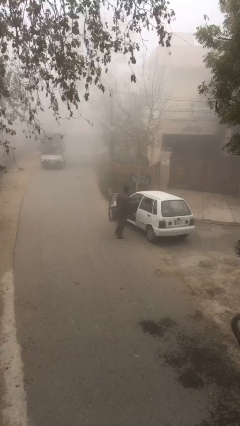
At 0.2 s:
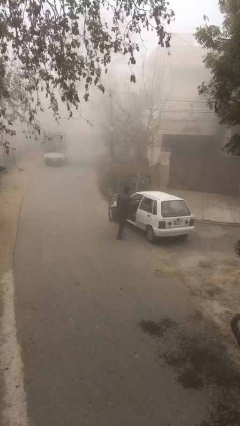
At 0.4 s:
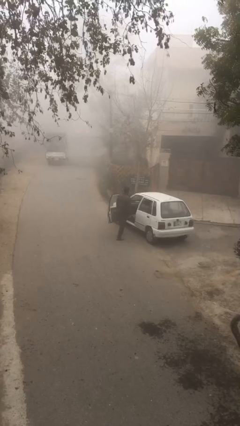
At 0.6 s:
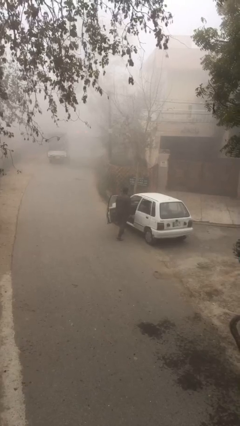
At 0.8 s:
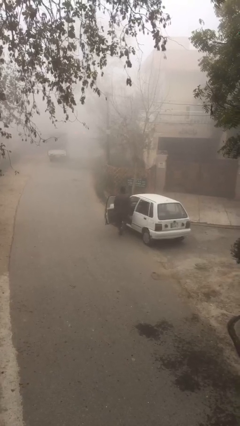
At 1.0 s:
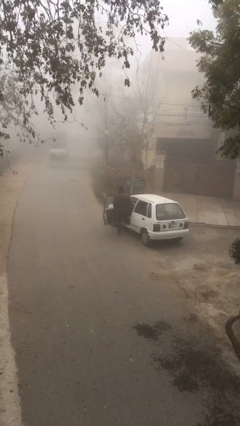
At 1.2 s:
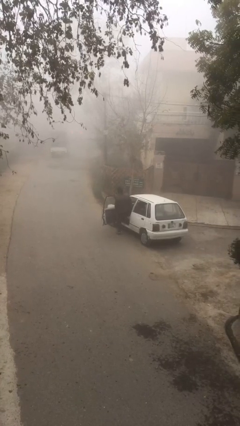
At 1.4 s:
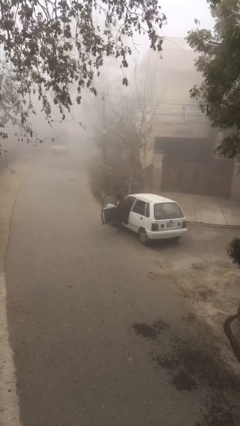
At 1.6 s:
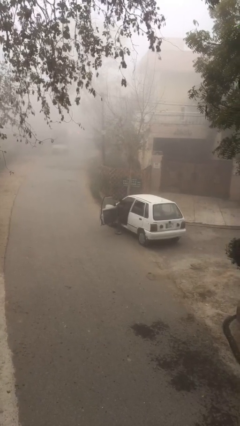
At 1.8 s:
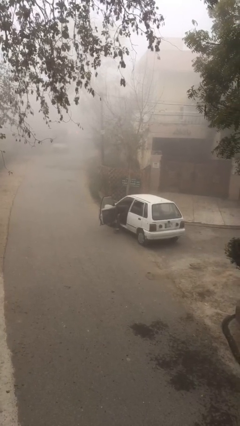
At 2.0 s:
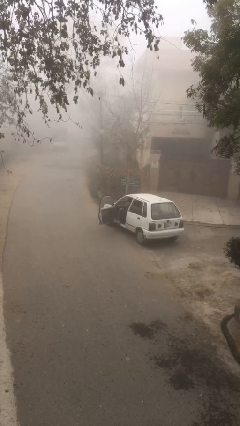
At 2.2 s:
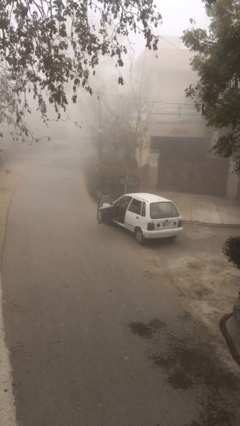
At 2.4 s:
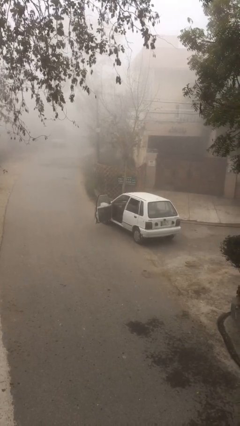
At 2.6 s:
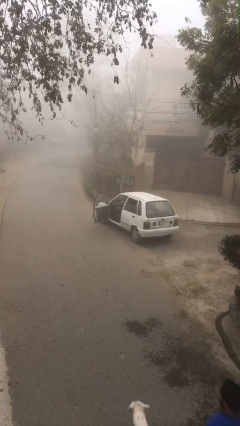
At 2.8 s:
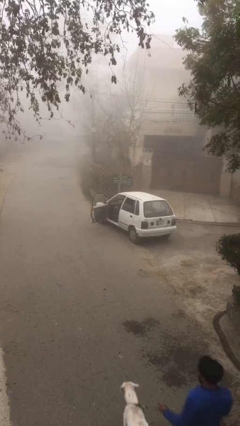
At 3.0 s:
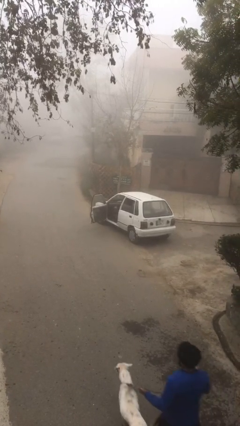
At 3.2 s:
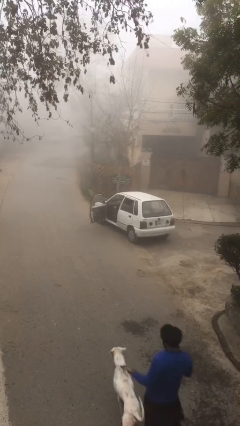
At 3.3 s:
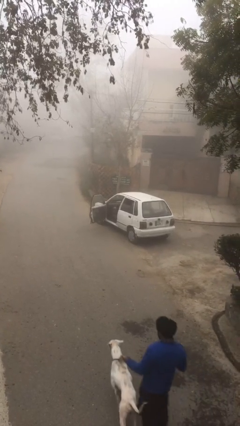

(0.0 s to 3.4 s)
person enters car

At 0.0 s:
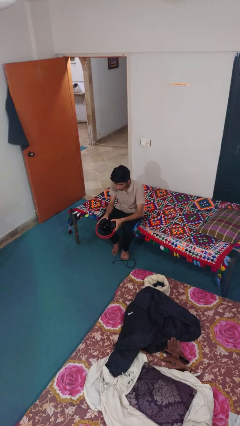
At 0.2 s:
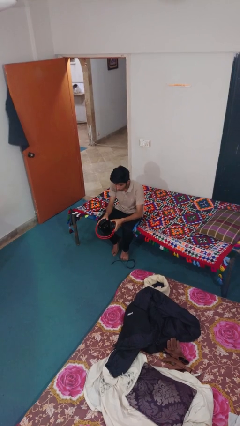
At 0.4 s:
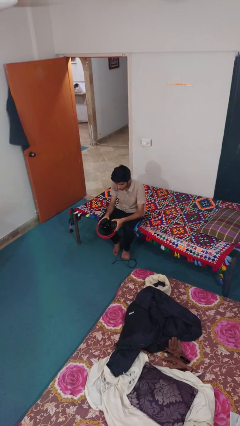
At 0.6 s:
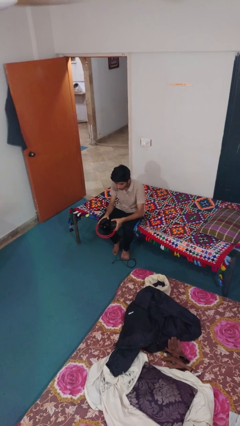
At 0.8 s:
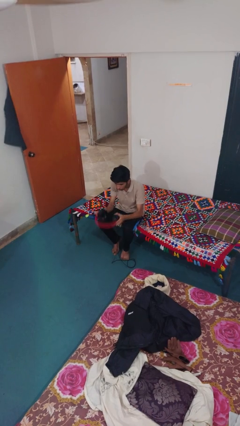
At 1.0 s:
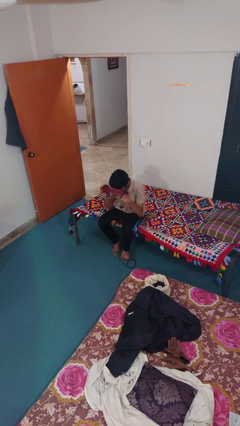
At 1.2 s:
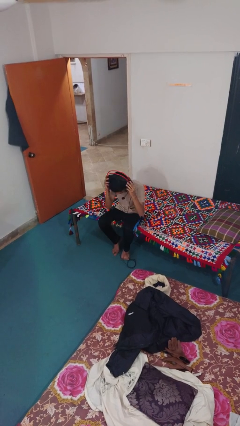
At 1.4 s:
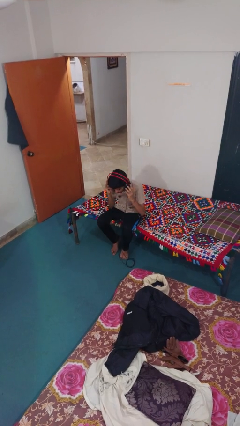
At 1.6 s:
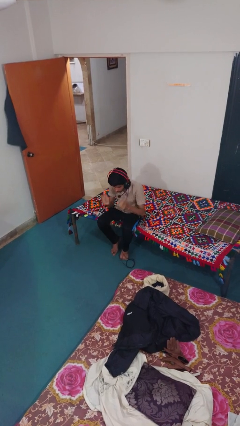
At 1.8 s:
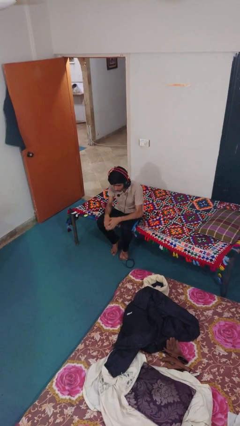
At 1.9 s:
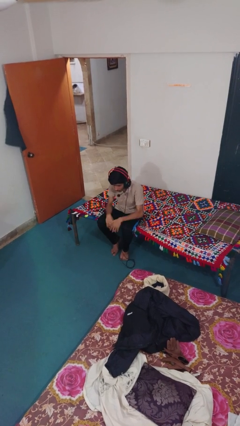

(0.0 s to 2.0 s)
person puts on headphones

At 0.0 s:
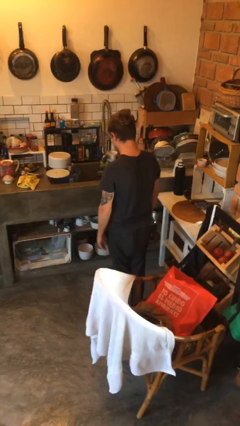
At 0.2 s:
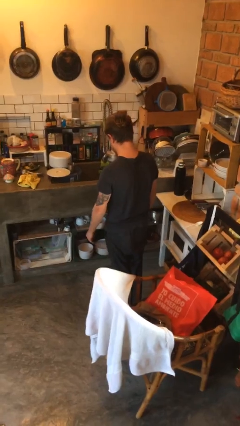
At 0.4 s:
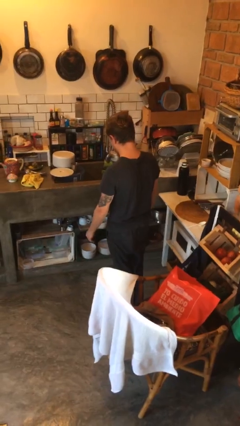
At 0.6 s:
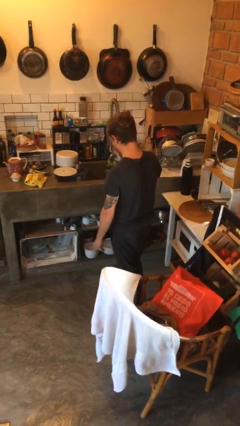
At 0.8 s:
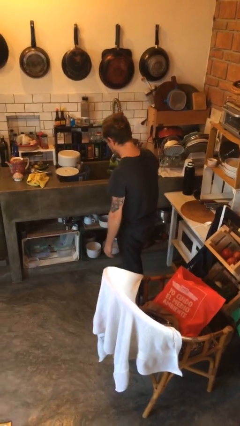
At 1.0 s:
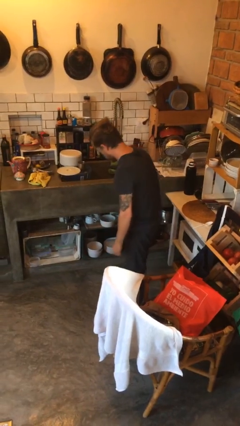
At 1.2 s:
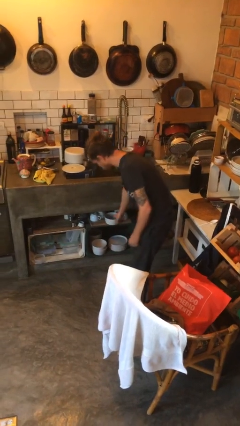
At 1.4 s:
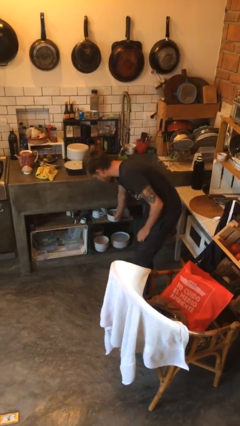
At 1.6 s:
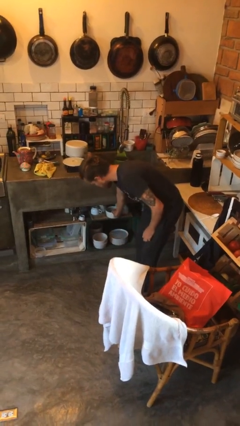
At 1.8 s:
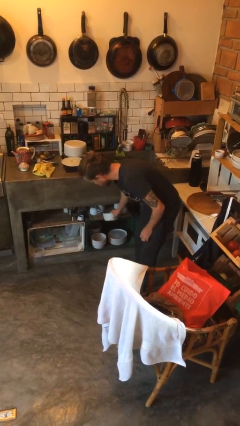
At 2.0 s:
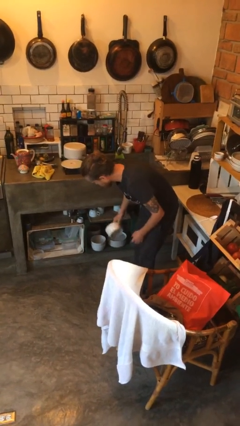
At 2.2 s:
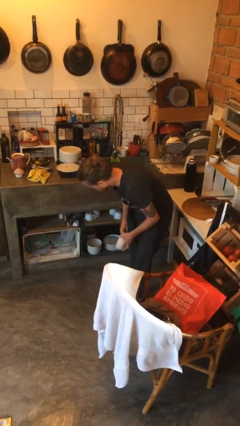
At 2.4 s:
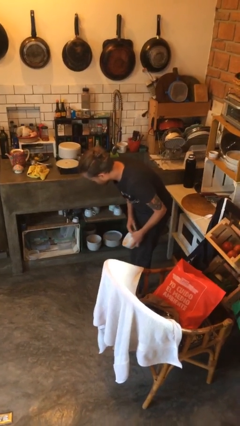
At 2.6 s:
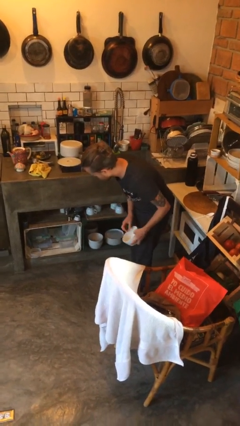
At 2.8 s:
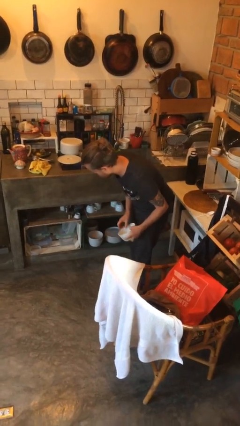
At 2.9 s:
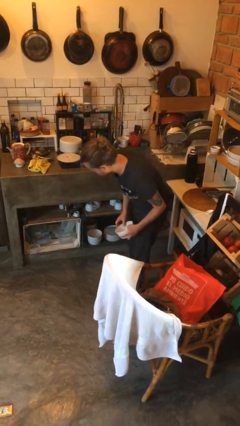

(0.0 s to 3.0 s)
person picks up object from cabinet

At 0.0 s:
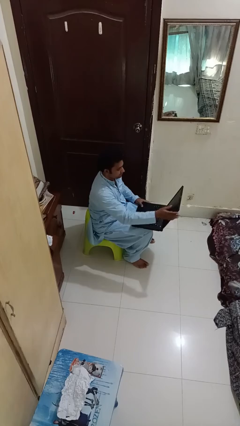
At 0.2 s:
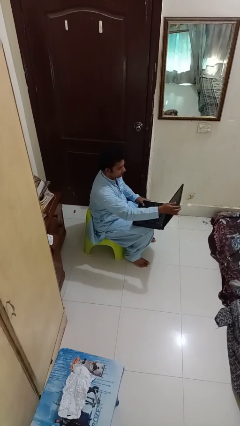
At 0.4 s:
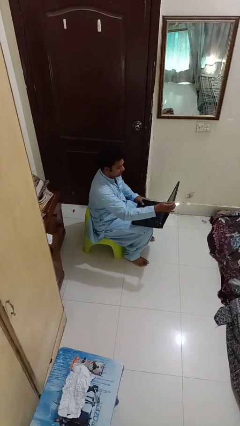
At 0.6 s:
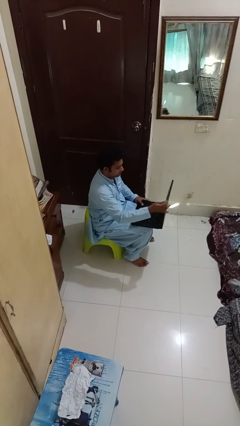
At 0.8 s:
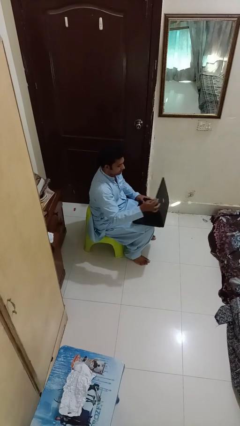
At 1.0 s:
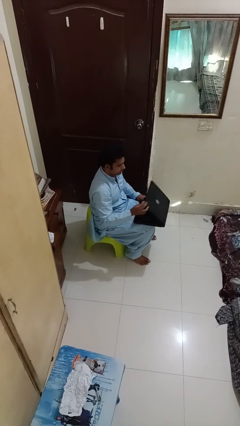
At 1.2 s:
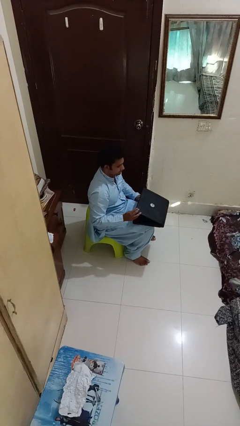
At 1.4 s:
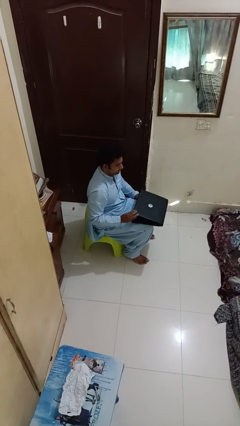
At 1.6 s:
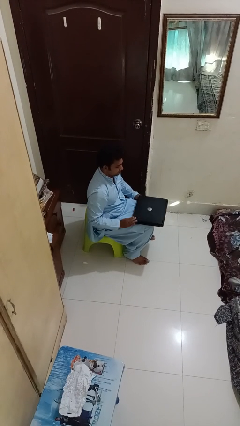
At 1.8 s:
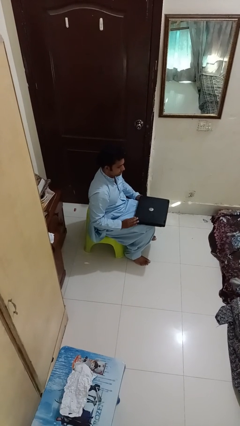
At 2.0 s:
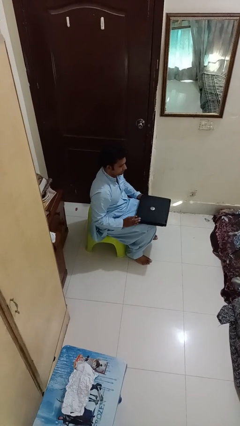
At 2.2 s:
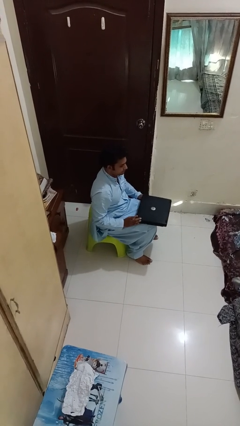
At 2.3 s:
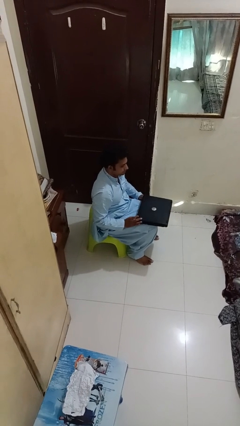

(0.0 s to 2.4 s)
person closes laptop

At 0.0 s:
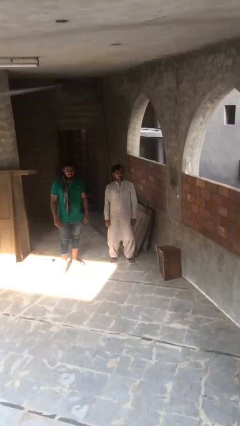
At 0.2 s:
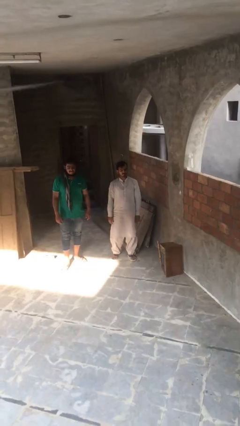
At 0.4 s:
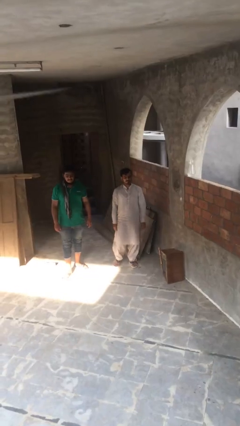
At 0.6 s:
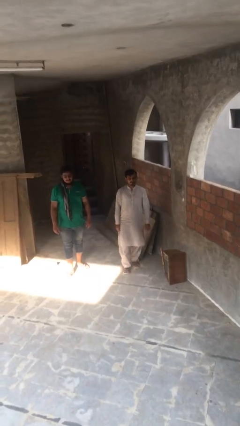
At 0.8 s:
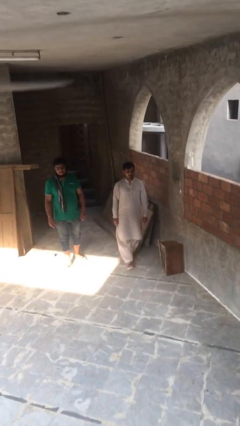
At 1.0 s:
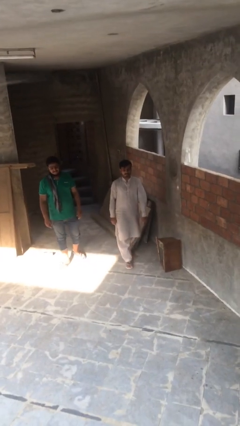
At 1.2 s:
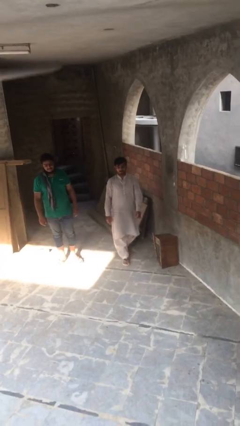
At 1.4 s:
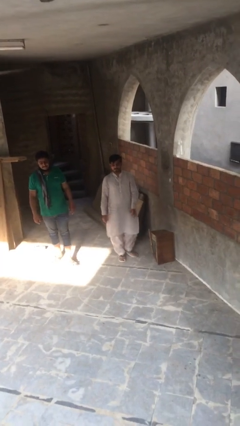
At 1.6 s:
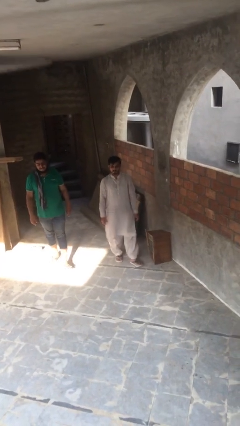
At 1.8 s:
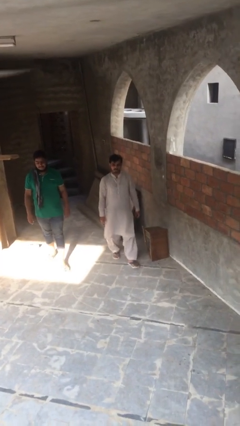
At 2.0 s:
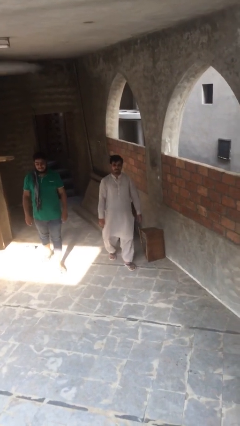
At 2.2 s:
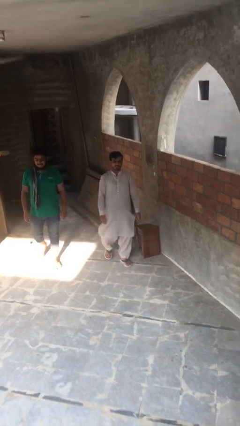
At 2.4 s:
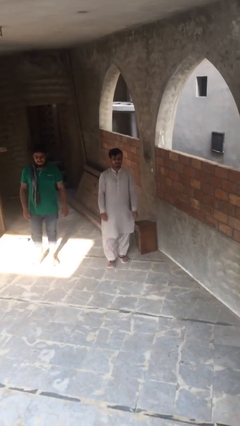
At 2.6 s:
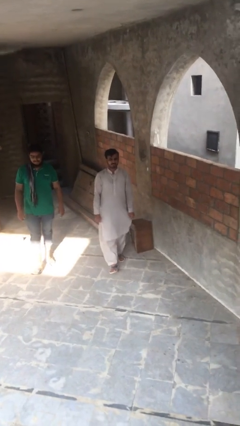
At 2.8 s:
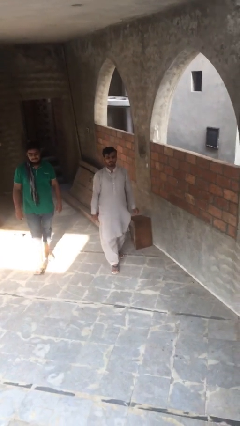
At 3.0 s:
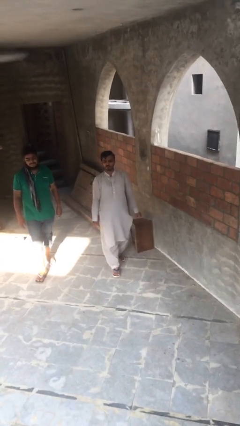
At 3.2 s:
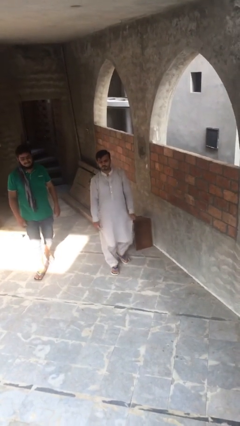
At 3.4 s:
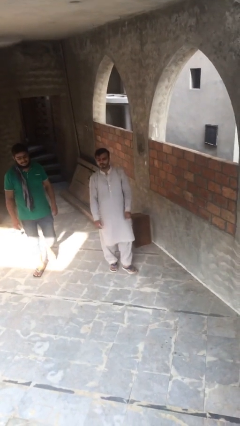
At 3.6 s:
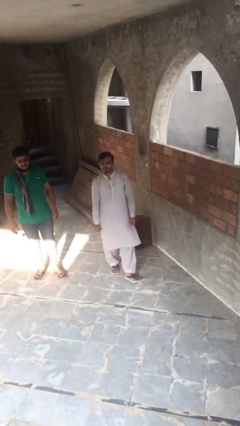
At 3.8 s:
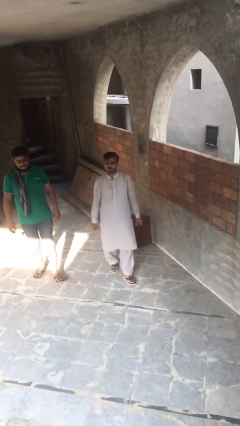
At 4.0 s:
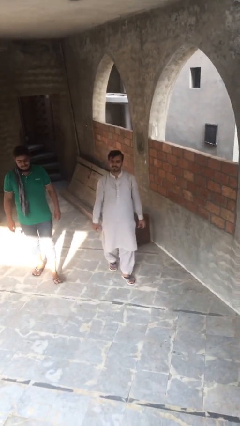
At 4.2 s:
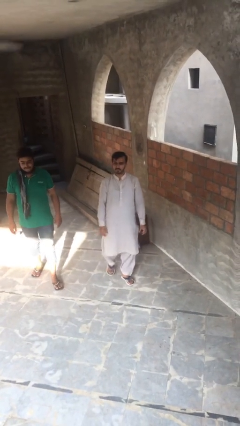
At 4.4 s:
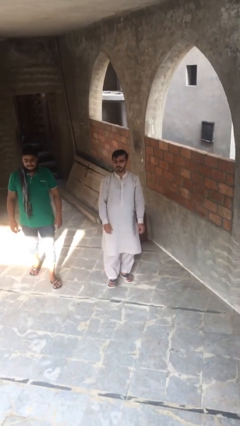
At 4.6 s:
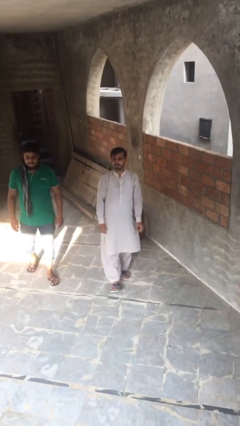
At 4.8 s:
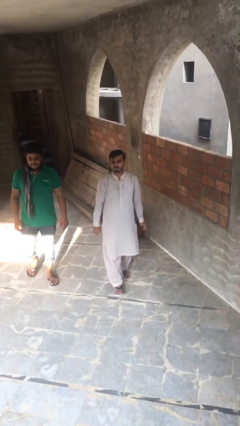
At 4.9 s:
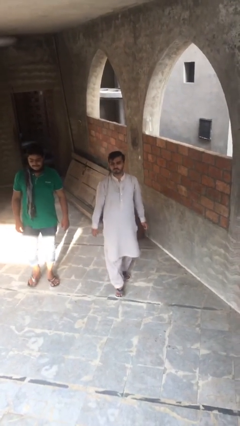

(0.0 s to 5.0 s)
person talks to person

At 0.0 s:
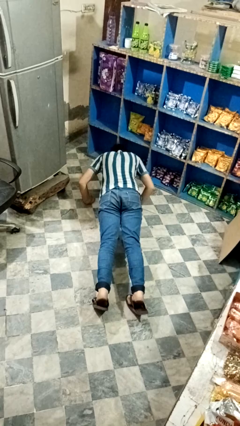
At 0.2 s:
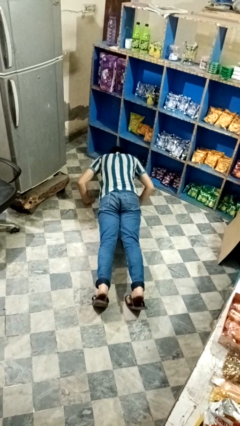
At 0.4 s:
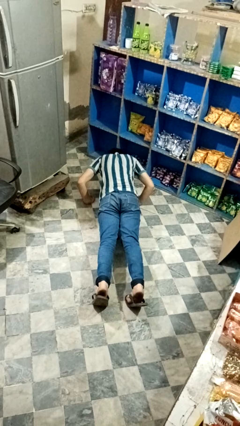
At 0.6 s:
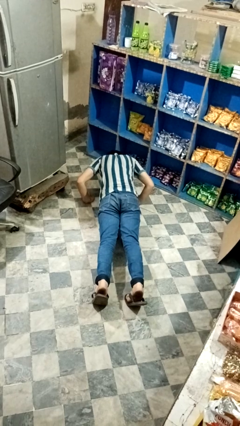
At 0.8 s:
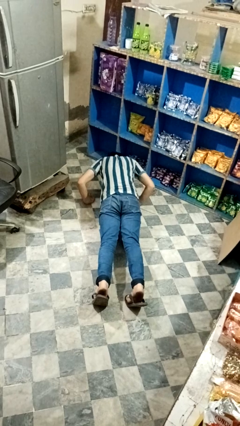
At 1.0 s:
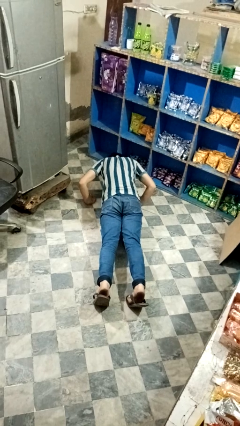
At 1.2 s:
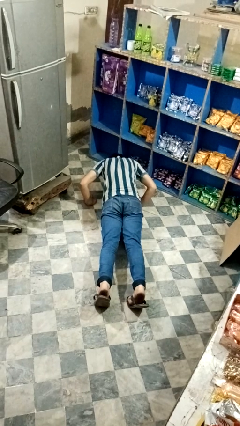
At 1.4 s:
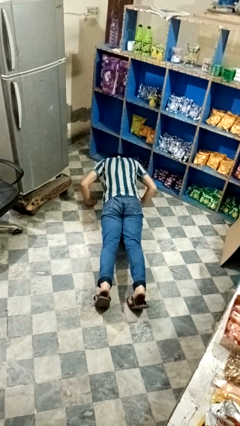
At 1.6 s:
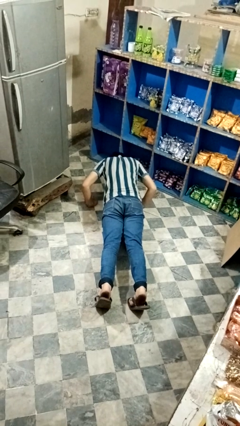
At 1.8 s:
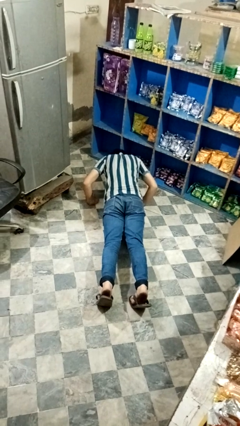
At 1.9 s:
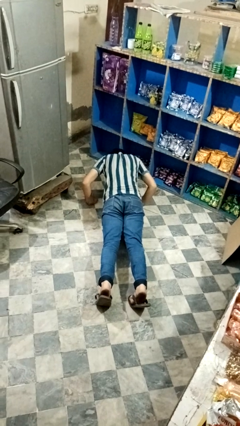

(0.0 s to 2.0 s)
person exercises with pushup
